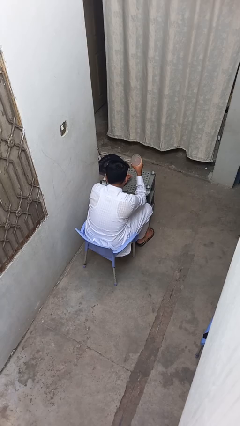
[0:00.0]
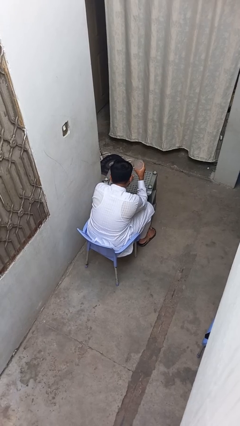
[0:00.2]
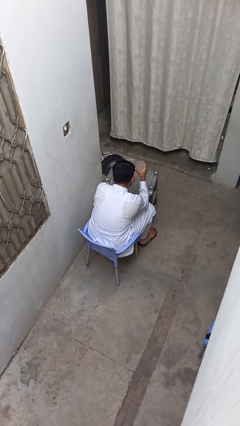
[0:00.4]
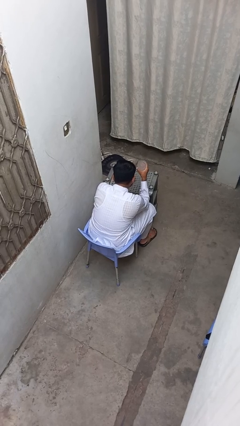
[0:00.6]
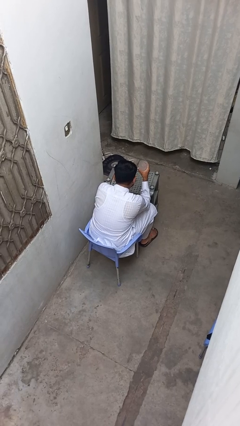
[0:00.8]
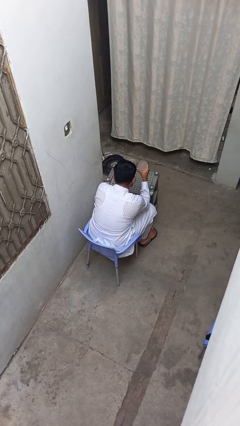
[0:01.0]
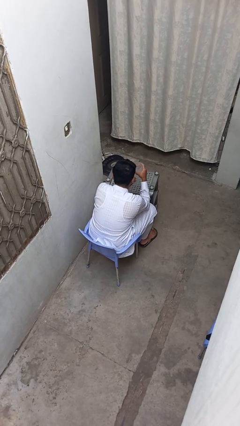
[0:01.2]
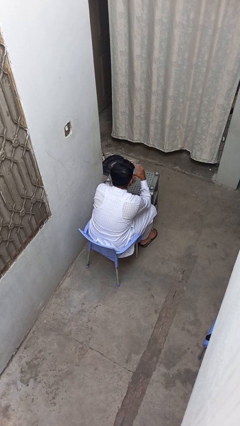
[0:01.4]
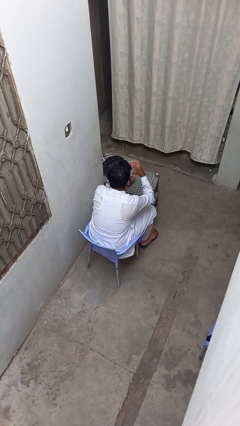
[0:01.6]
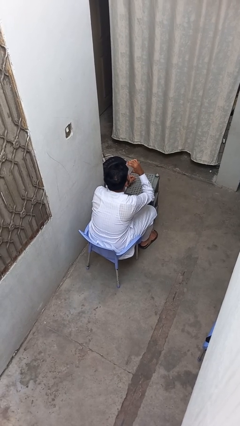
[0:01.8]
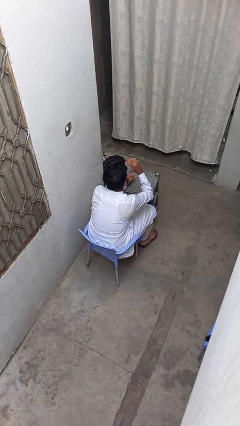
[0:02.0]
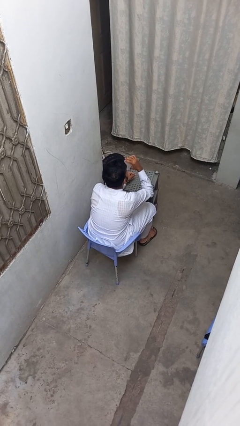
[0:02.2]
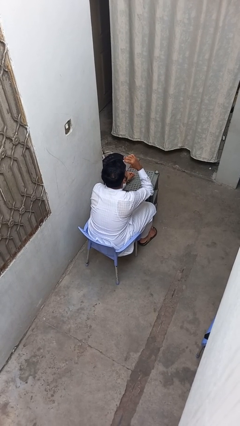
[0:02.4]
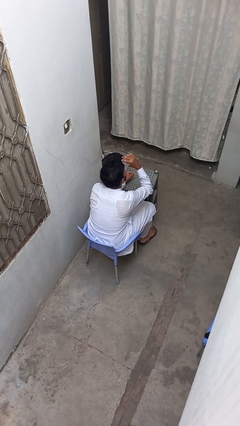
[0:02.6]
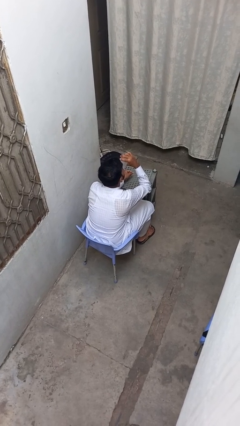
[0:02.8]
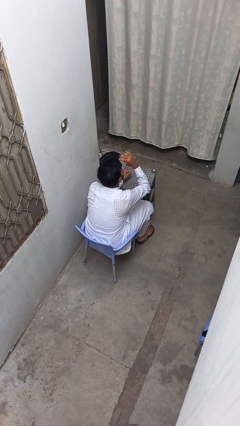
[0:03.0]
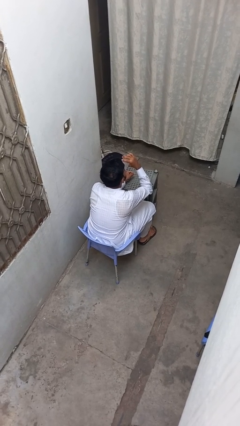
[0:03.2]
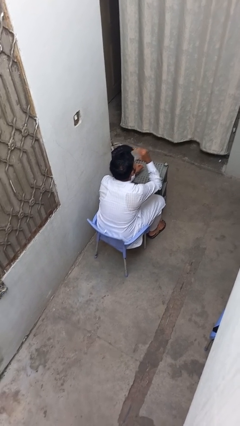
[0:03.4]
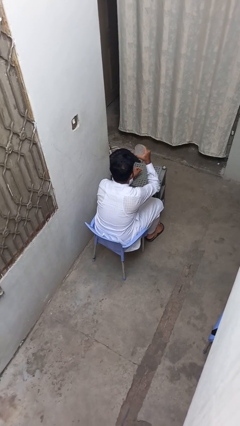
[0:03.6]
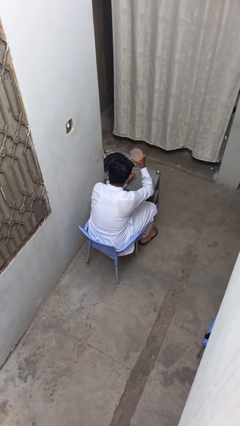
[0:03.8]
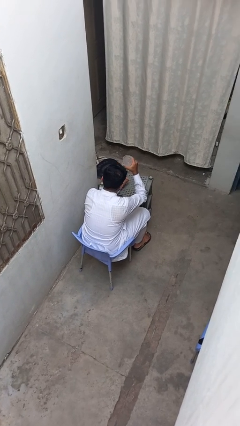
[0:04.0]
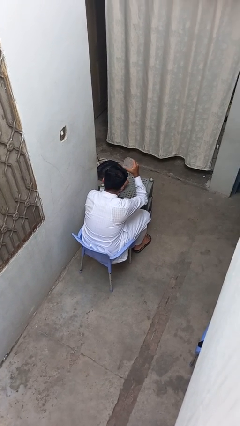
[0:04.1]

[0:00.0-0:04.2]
person drinks from shotglass

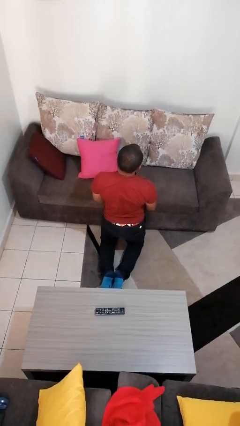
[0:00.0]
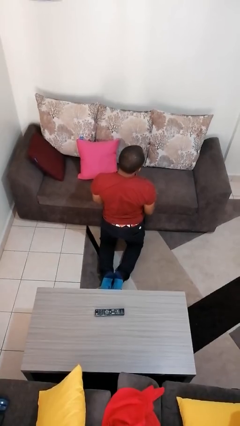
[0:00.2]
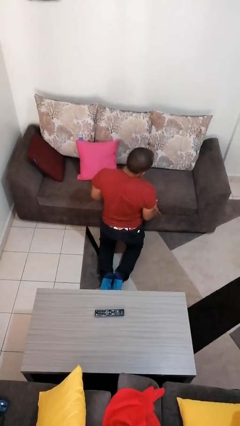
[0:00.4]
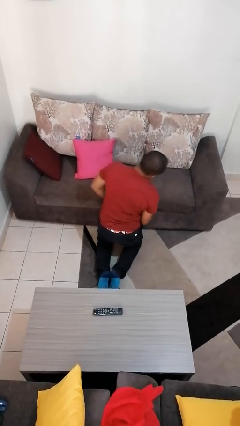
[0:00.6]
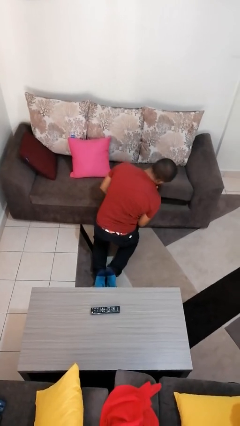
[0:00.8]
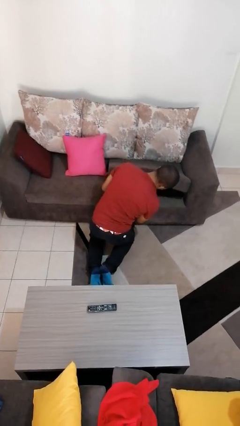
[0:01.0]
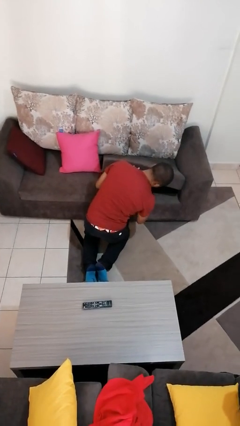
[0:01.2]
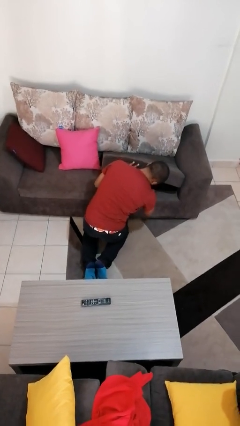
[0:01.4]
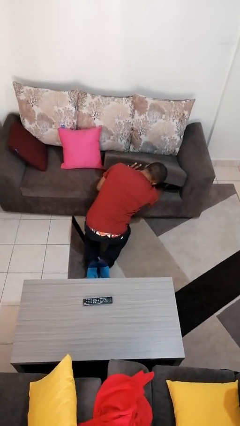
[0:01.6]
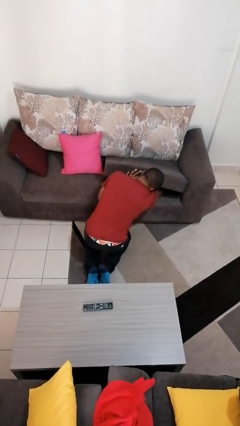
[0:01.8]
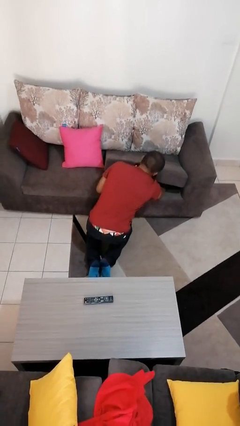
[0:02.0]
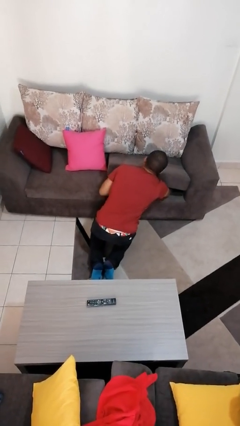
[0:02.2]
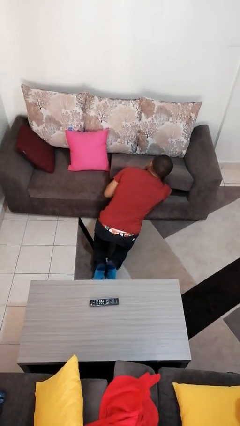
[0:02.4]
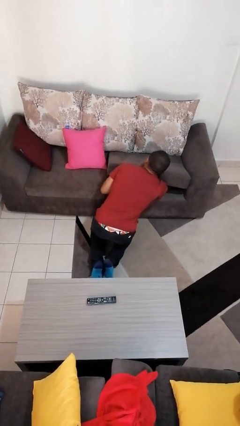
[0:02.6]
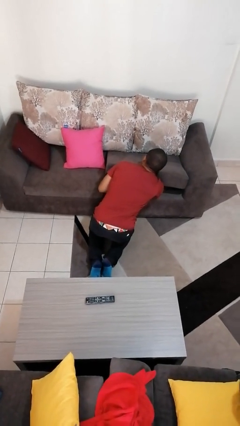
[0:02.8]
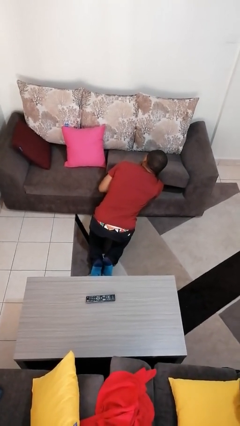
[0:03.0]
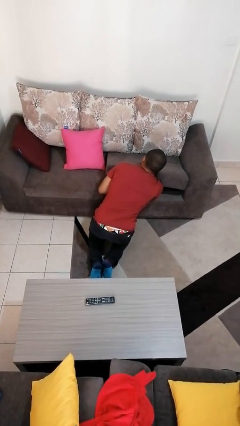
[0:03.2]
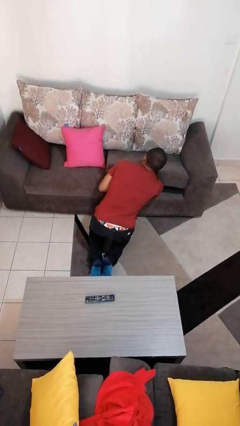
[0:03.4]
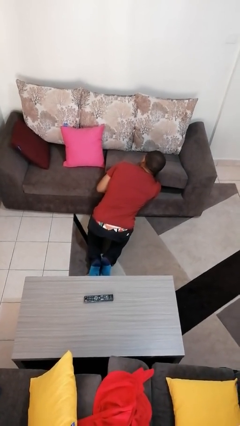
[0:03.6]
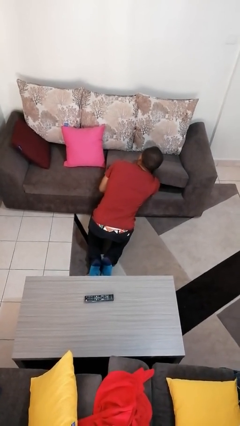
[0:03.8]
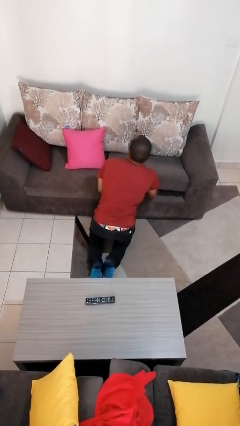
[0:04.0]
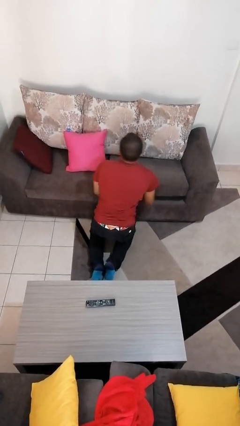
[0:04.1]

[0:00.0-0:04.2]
person searches under couch

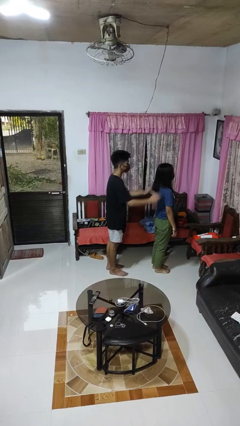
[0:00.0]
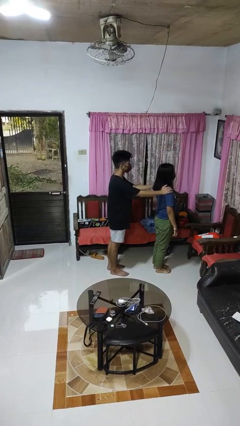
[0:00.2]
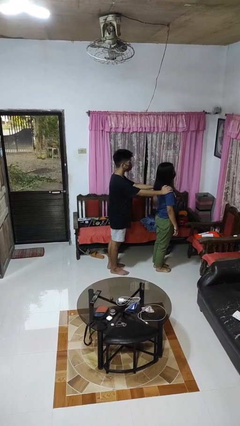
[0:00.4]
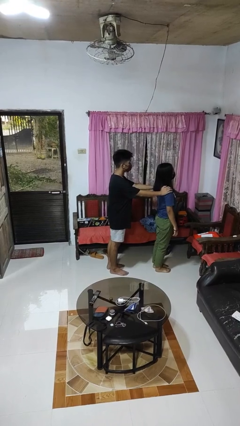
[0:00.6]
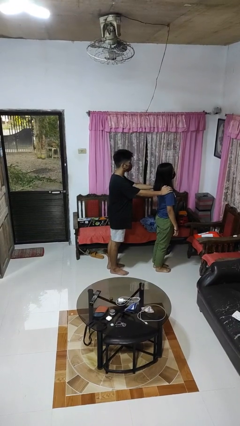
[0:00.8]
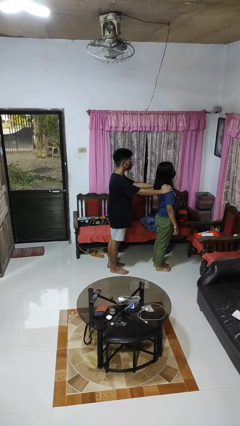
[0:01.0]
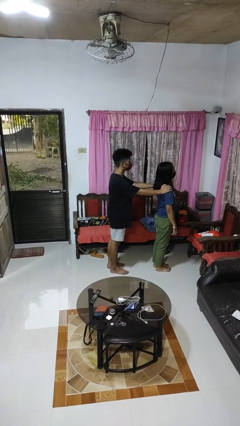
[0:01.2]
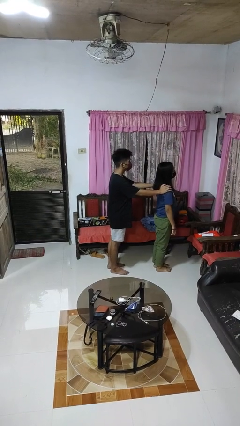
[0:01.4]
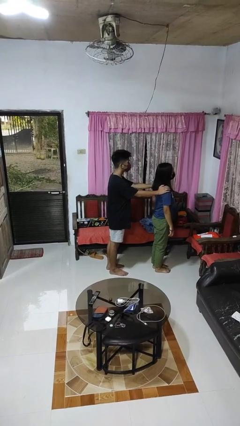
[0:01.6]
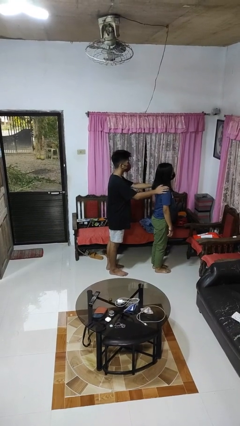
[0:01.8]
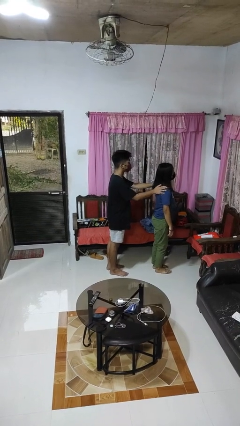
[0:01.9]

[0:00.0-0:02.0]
person grabs person by shoulder

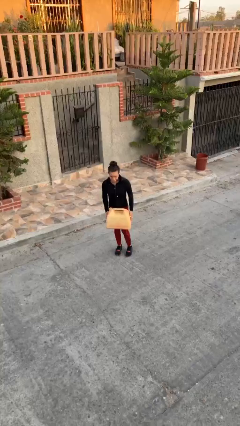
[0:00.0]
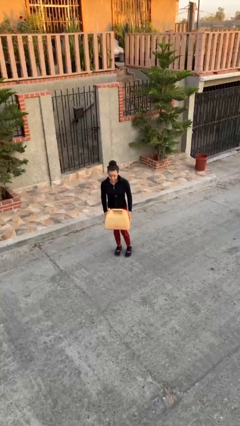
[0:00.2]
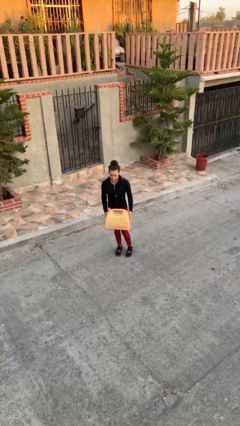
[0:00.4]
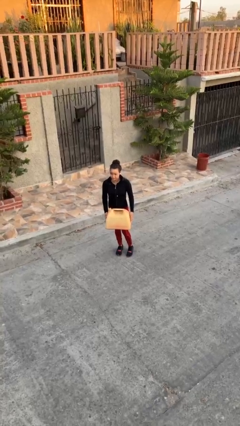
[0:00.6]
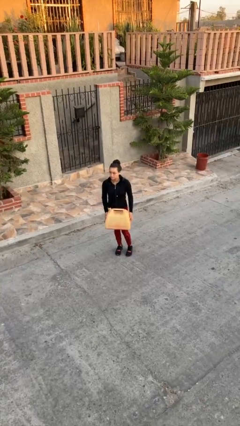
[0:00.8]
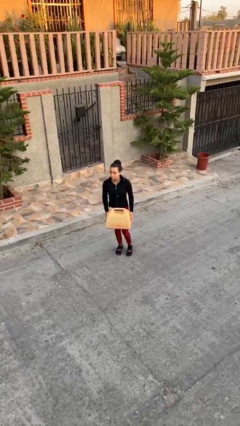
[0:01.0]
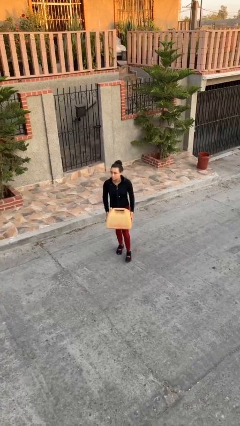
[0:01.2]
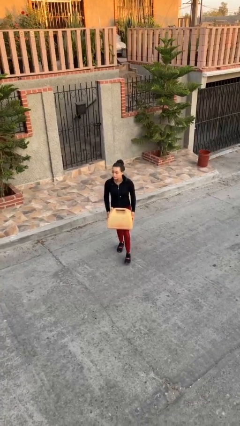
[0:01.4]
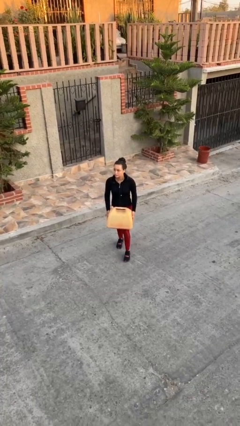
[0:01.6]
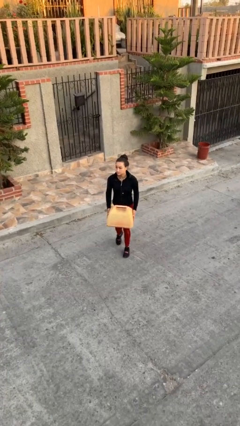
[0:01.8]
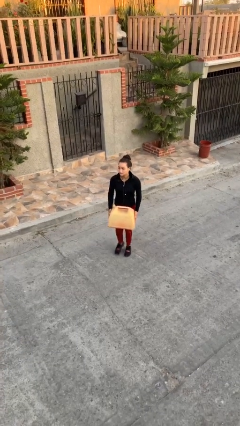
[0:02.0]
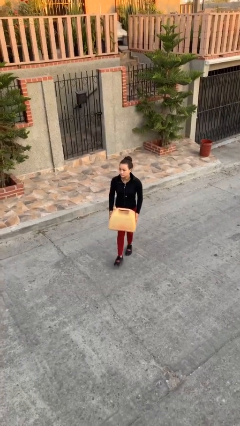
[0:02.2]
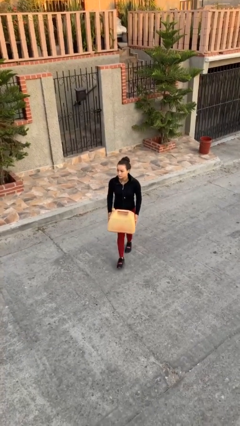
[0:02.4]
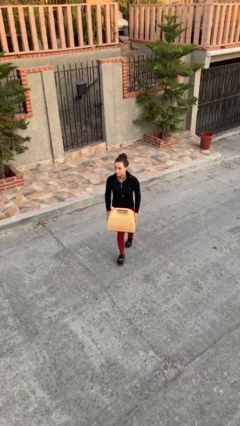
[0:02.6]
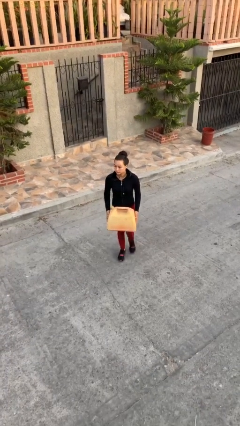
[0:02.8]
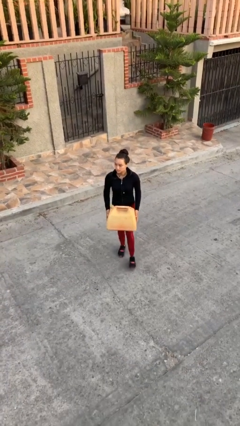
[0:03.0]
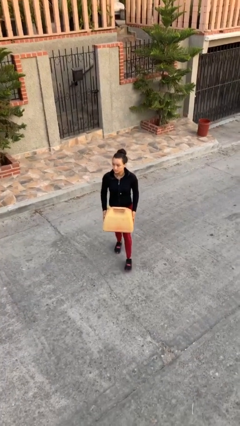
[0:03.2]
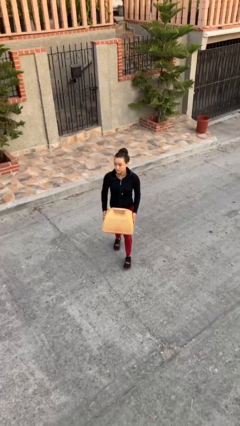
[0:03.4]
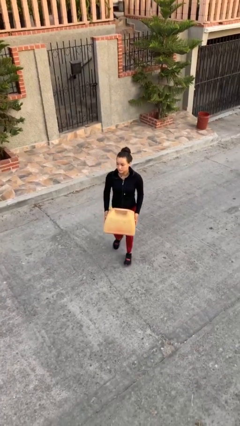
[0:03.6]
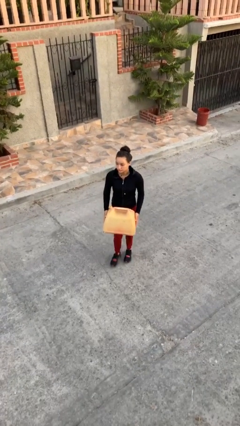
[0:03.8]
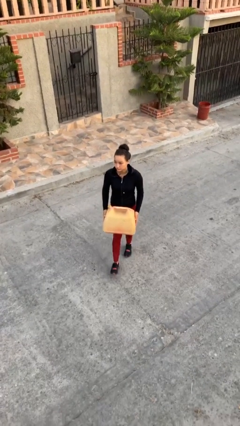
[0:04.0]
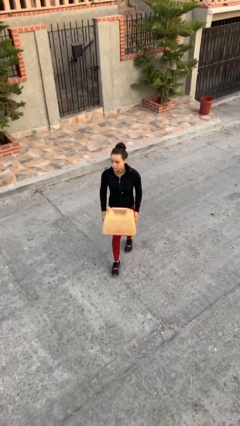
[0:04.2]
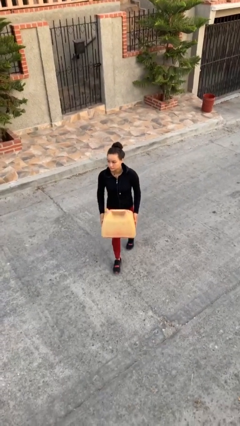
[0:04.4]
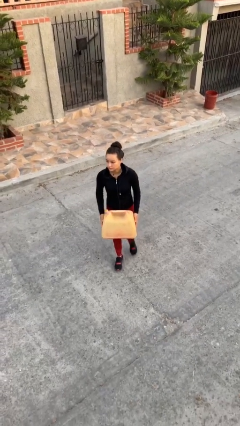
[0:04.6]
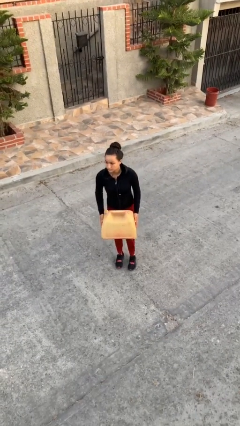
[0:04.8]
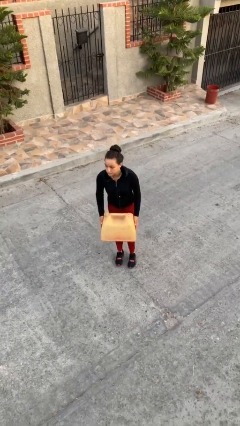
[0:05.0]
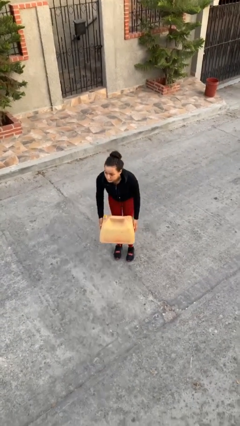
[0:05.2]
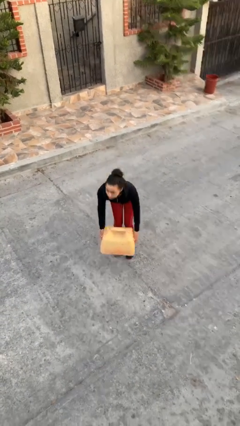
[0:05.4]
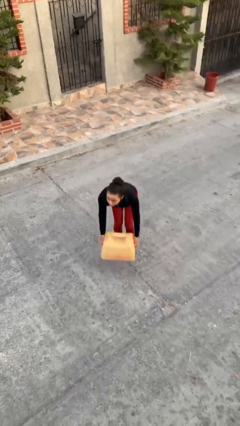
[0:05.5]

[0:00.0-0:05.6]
person carries heavy object

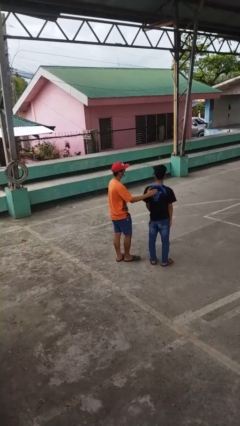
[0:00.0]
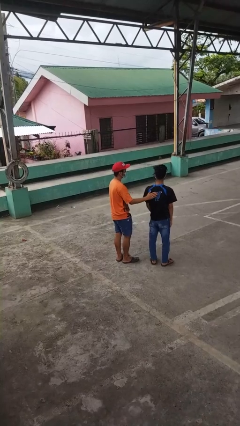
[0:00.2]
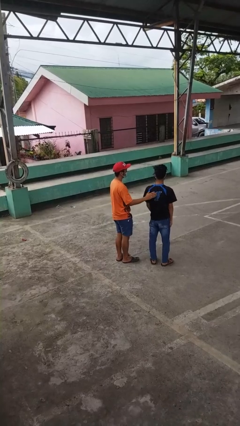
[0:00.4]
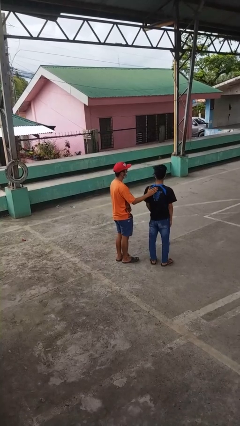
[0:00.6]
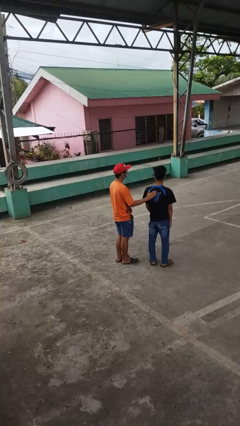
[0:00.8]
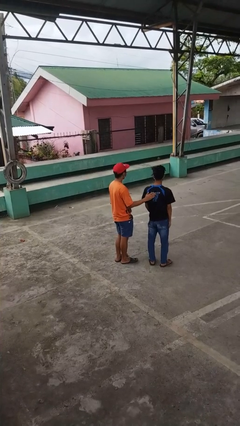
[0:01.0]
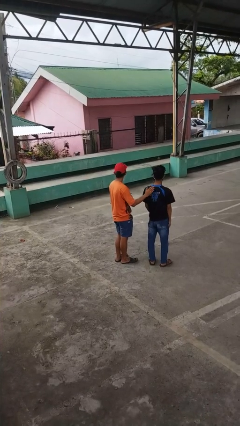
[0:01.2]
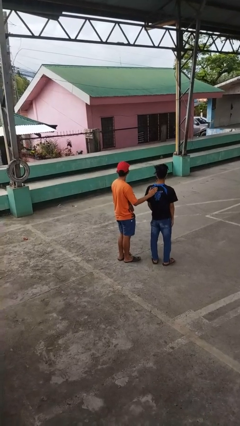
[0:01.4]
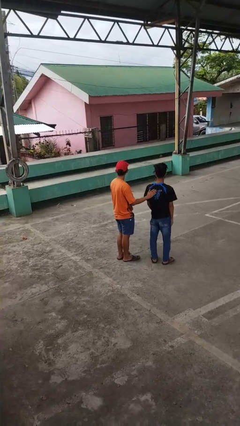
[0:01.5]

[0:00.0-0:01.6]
person touches back of person
